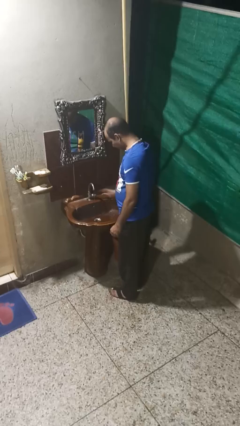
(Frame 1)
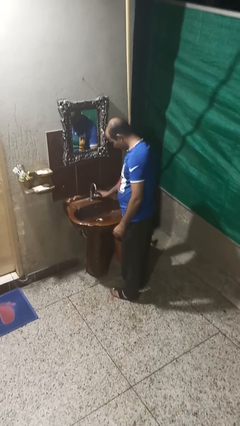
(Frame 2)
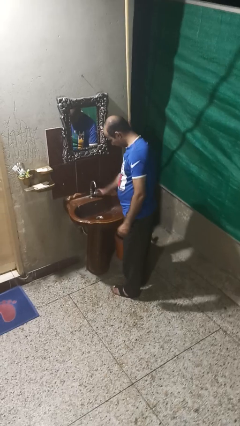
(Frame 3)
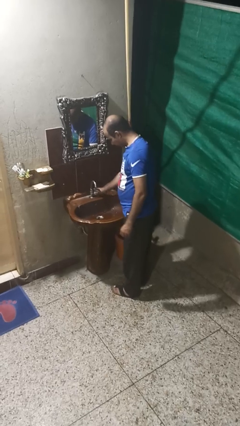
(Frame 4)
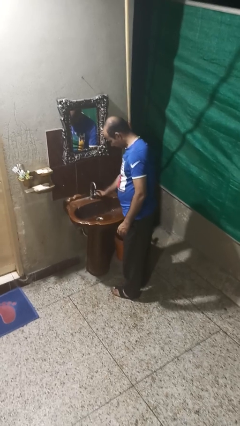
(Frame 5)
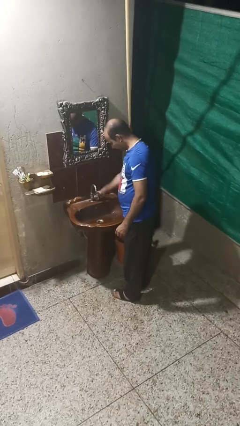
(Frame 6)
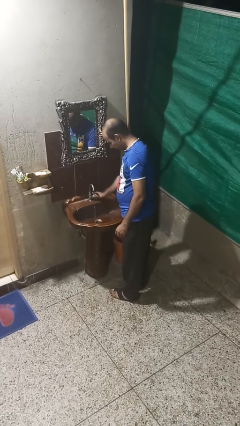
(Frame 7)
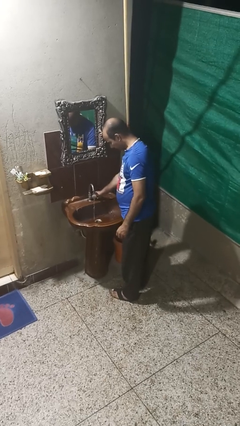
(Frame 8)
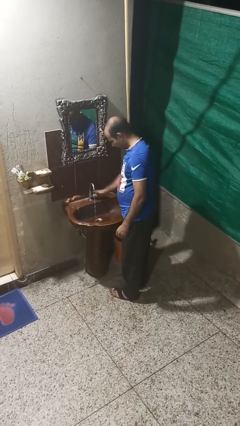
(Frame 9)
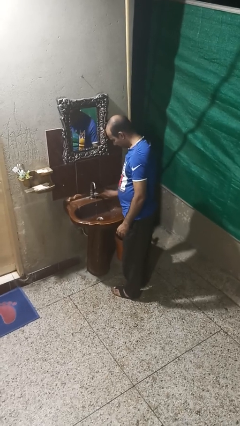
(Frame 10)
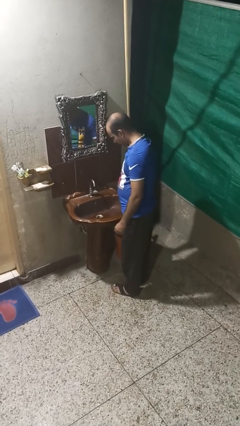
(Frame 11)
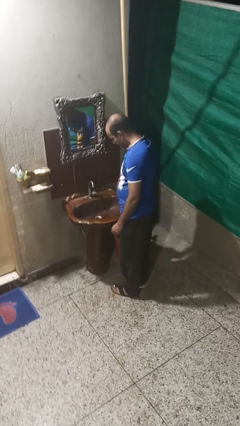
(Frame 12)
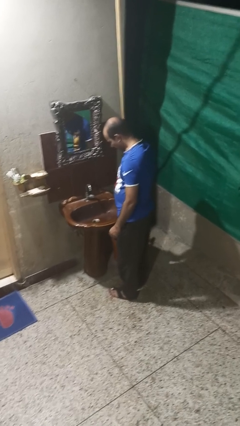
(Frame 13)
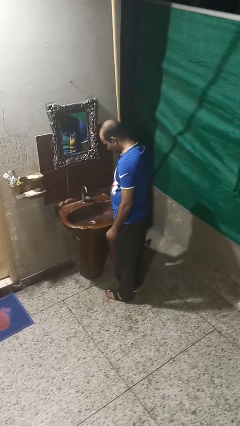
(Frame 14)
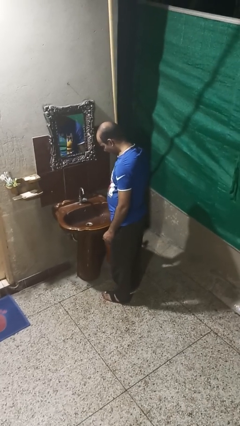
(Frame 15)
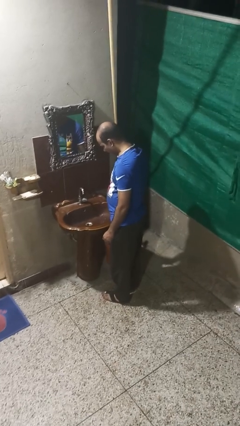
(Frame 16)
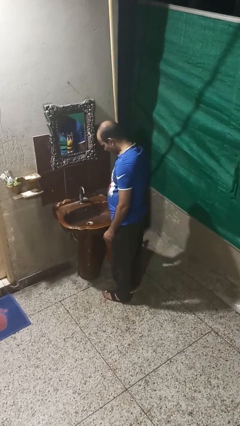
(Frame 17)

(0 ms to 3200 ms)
person turns off faucet

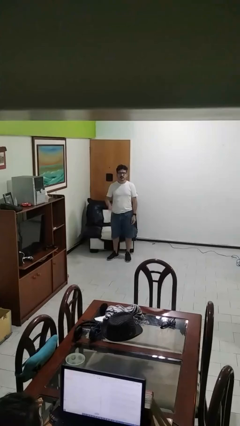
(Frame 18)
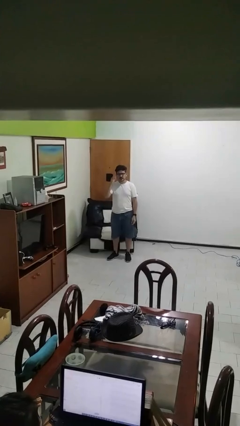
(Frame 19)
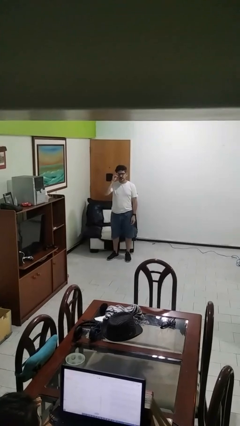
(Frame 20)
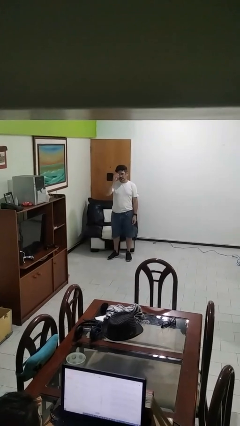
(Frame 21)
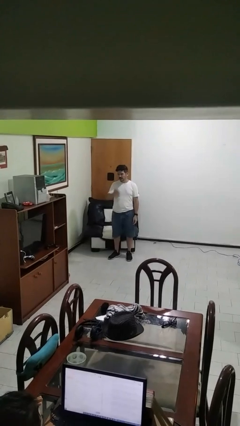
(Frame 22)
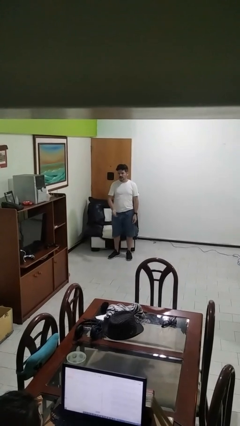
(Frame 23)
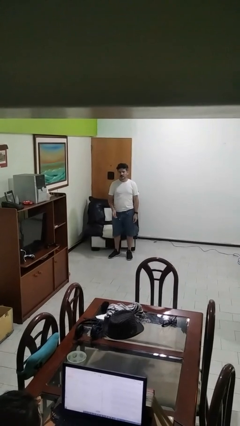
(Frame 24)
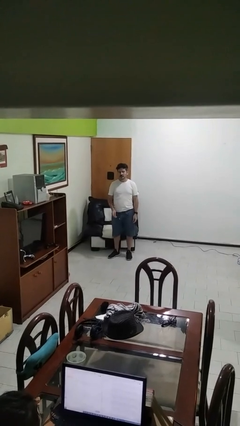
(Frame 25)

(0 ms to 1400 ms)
person takes off glasses

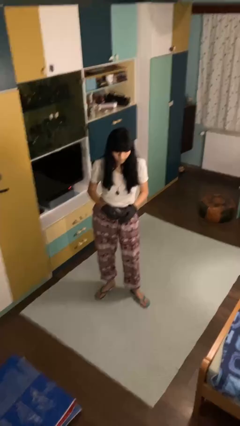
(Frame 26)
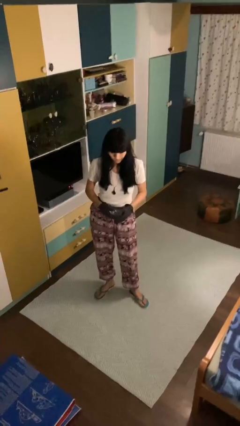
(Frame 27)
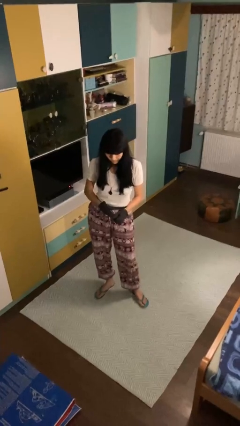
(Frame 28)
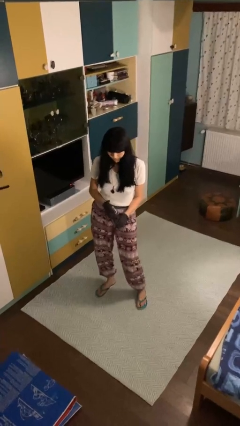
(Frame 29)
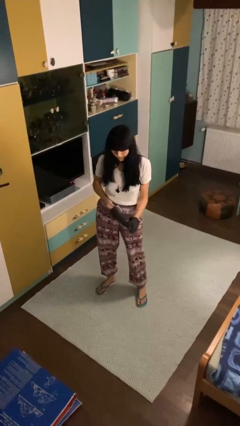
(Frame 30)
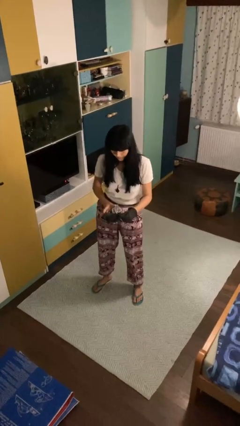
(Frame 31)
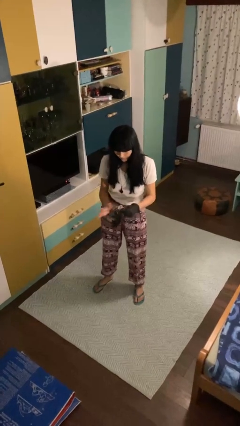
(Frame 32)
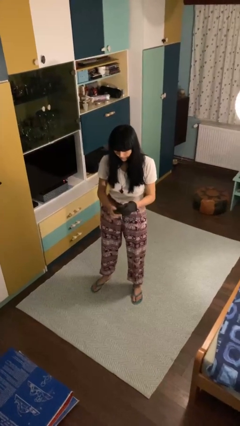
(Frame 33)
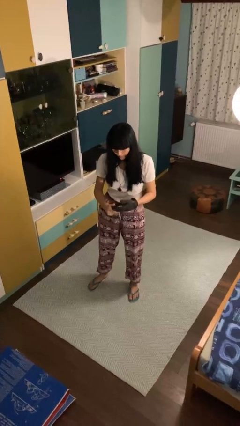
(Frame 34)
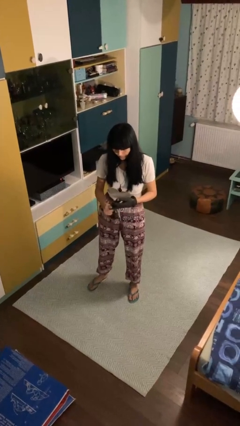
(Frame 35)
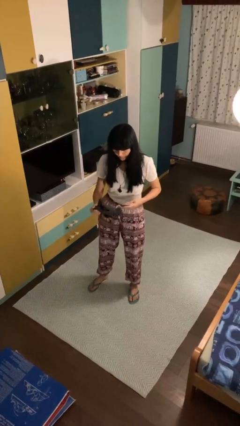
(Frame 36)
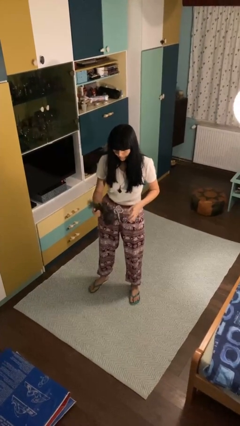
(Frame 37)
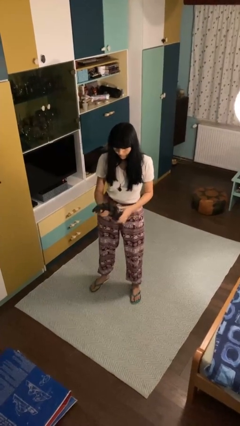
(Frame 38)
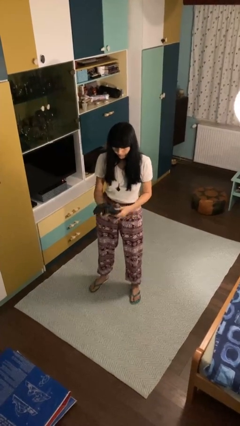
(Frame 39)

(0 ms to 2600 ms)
person takes off gloves

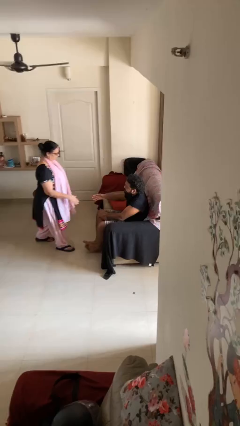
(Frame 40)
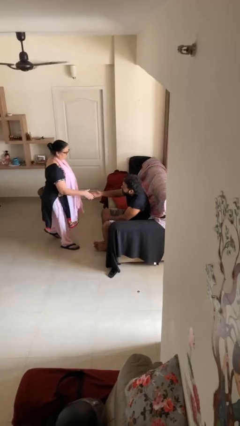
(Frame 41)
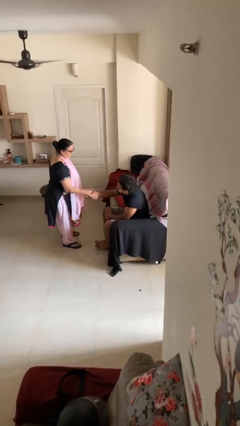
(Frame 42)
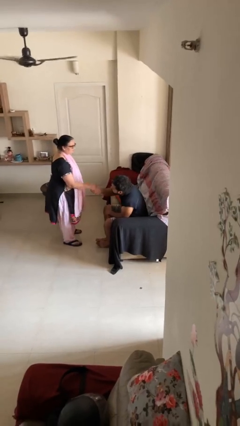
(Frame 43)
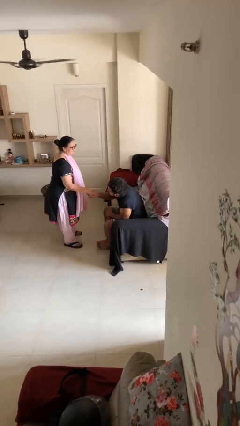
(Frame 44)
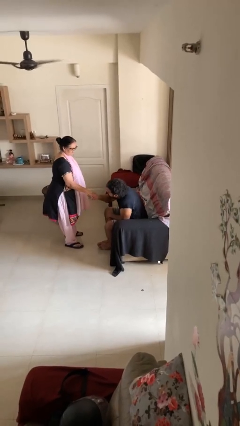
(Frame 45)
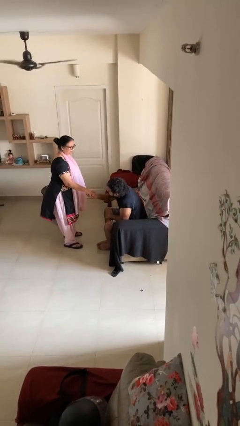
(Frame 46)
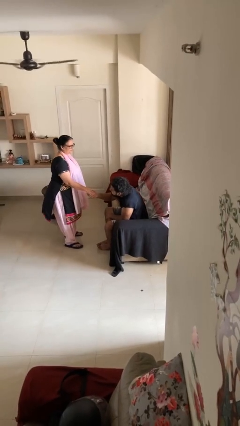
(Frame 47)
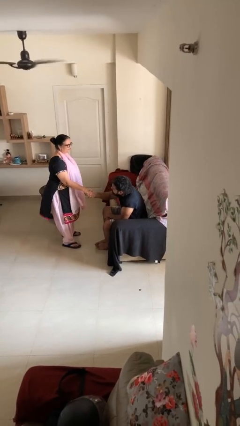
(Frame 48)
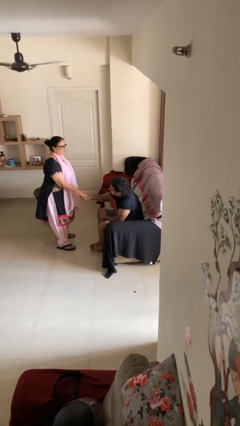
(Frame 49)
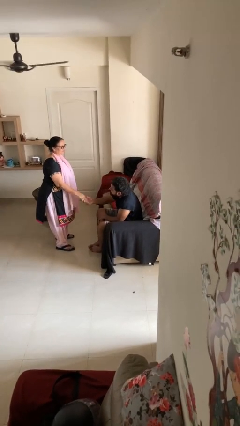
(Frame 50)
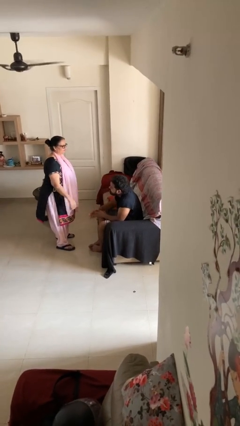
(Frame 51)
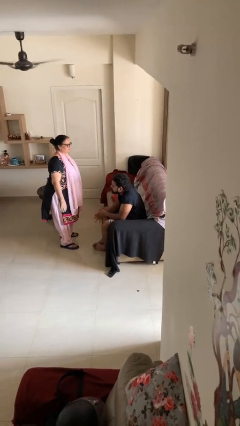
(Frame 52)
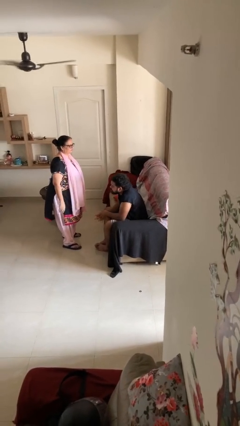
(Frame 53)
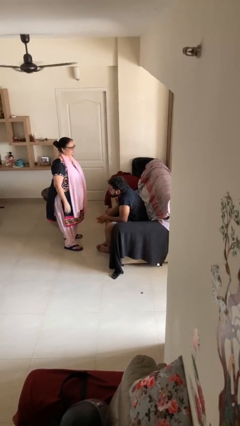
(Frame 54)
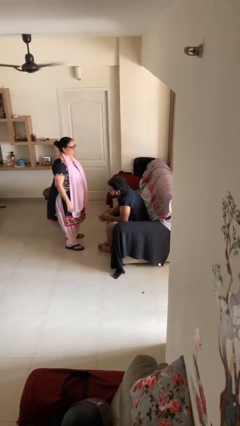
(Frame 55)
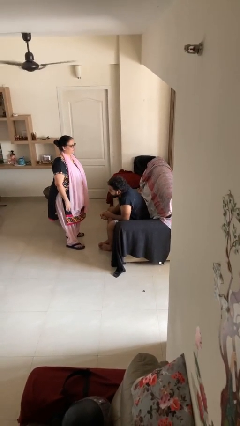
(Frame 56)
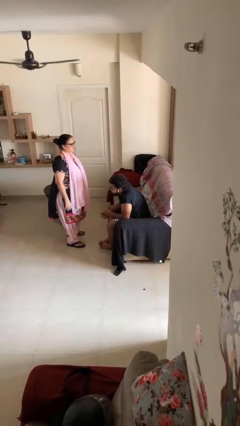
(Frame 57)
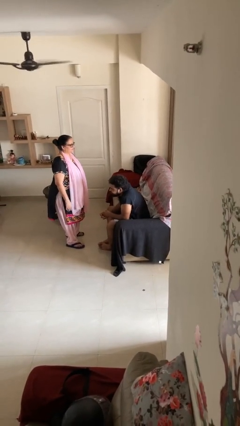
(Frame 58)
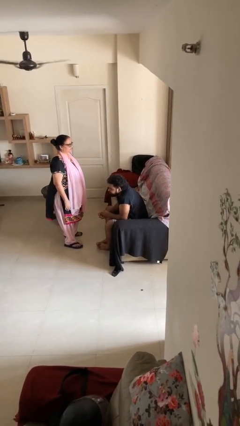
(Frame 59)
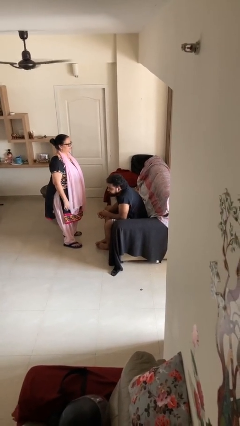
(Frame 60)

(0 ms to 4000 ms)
person shakes hand

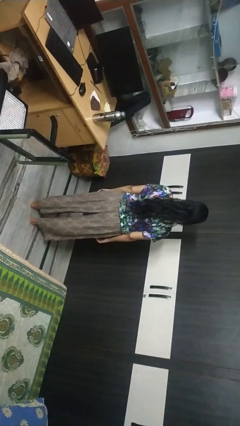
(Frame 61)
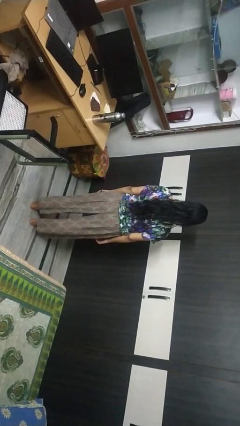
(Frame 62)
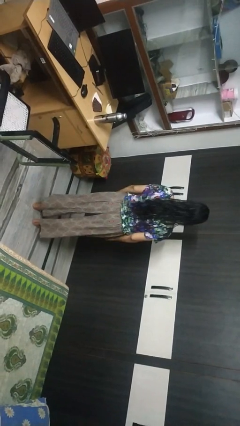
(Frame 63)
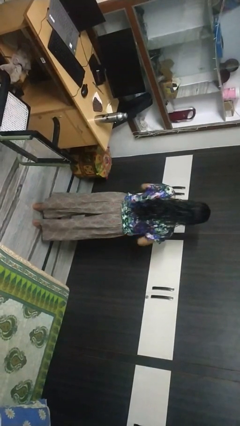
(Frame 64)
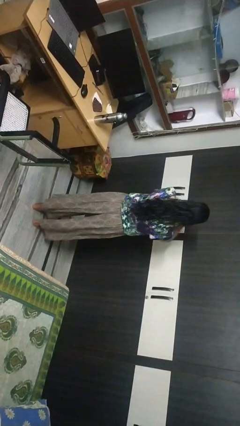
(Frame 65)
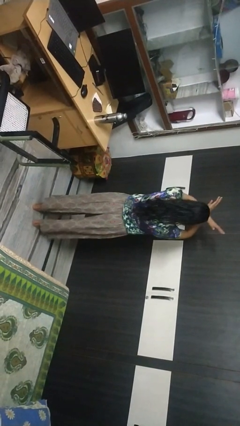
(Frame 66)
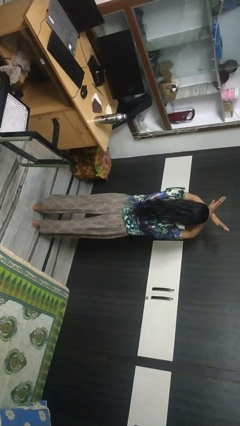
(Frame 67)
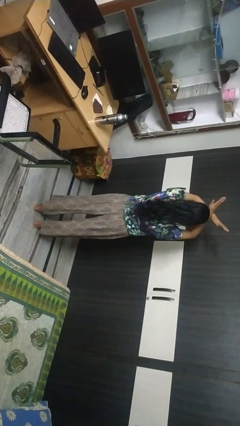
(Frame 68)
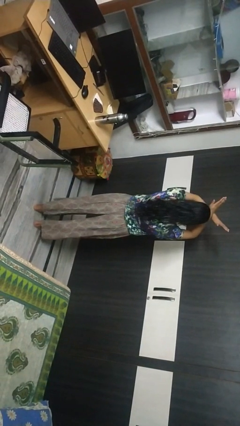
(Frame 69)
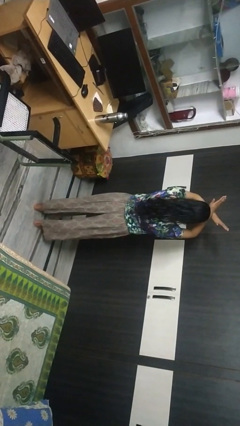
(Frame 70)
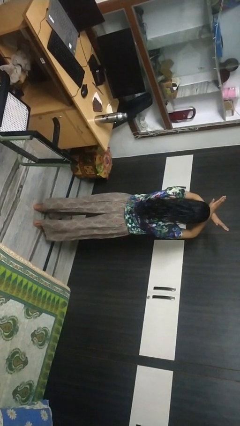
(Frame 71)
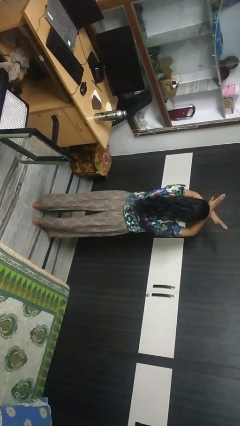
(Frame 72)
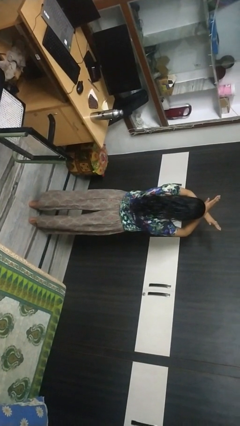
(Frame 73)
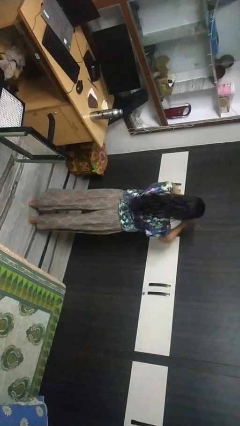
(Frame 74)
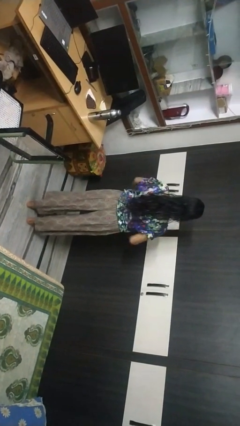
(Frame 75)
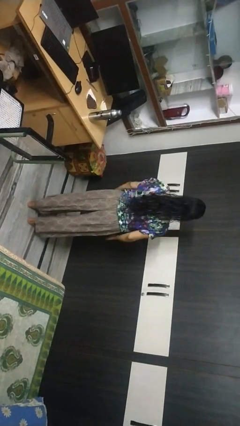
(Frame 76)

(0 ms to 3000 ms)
person gestures arms x

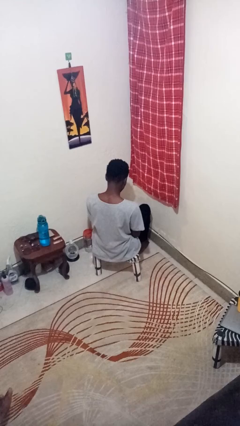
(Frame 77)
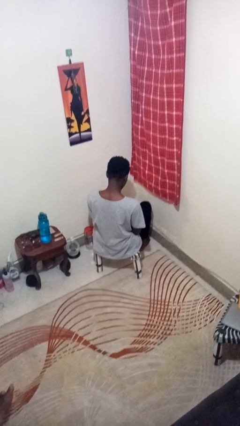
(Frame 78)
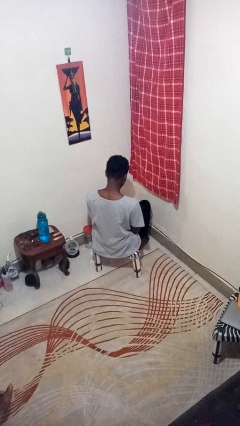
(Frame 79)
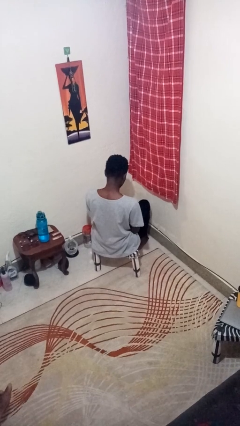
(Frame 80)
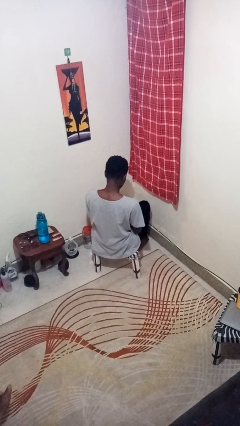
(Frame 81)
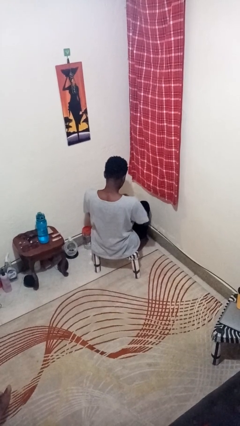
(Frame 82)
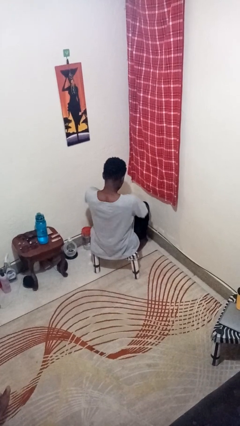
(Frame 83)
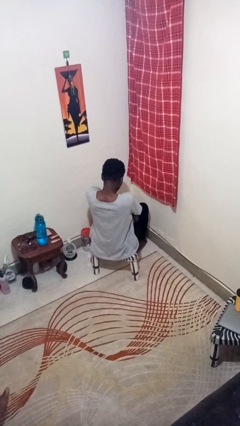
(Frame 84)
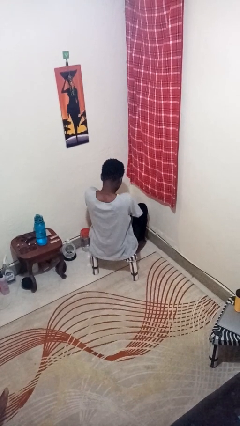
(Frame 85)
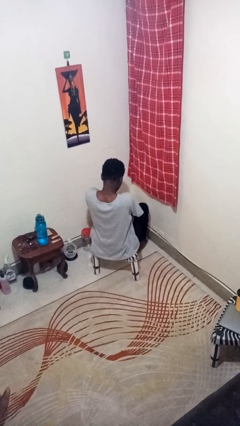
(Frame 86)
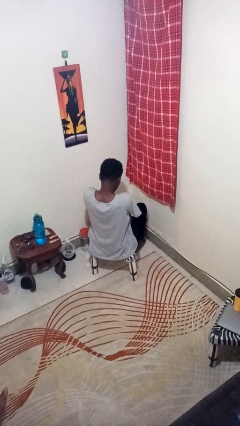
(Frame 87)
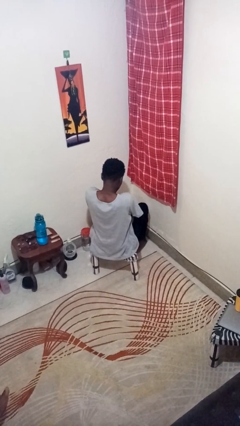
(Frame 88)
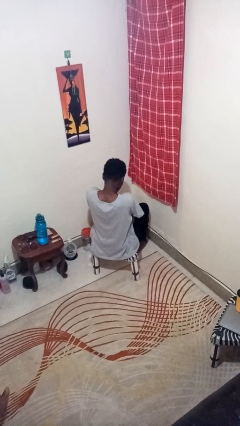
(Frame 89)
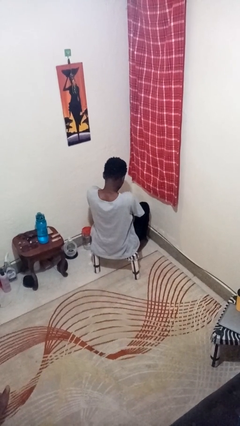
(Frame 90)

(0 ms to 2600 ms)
person crosses arms

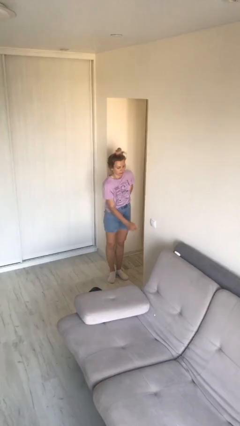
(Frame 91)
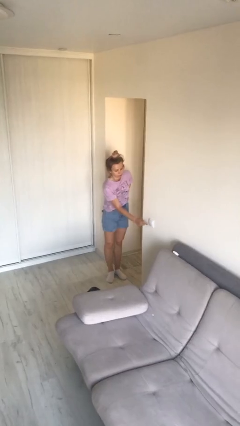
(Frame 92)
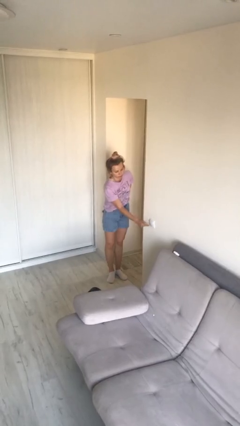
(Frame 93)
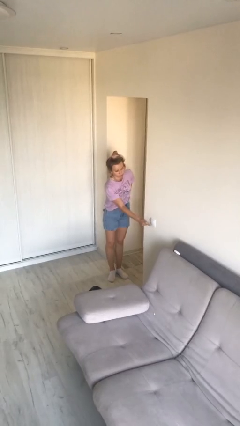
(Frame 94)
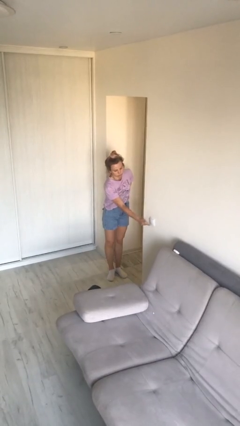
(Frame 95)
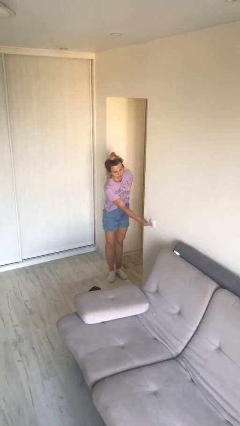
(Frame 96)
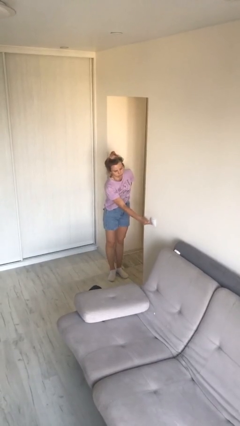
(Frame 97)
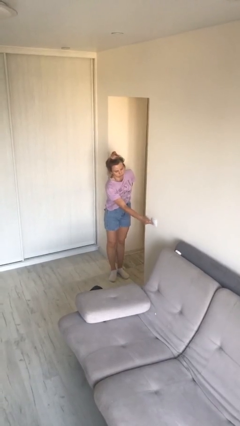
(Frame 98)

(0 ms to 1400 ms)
person taps object with finger
